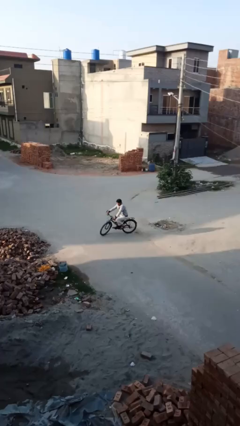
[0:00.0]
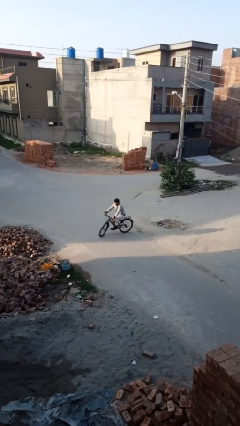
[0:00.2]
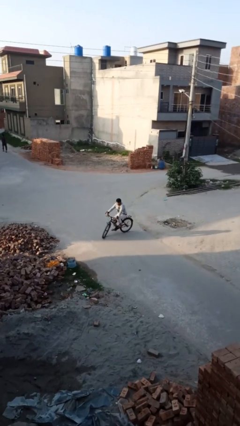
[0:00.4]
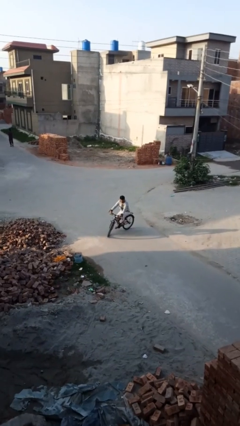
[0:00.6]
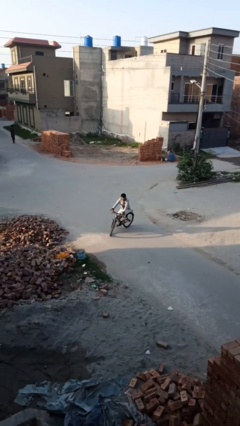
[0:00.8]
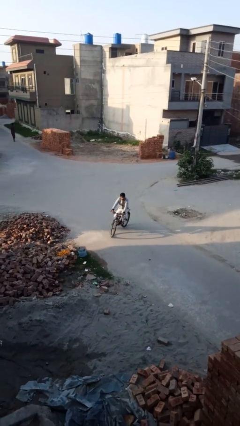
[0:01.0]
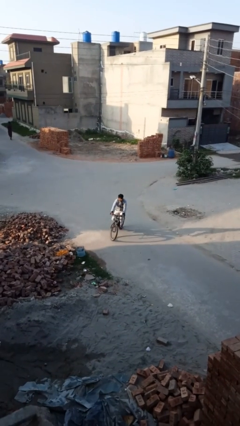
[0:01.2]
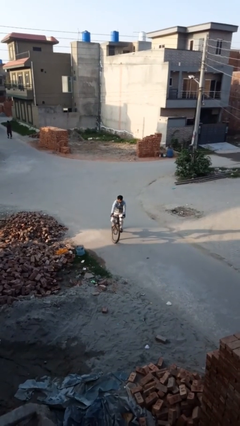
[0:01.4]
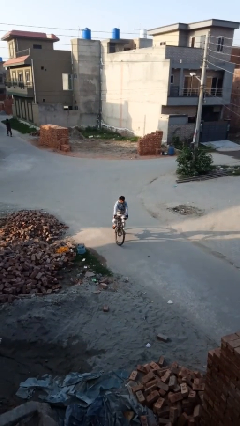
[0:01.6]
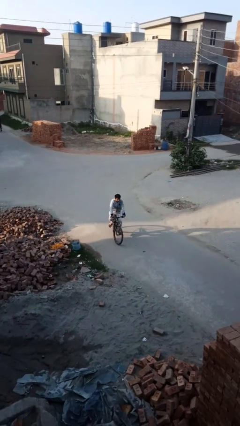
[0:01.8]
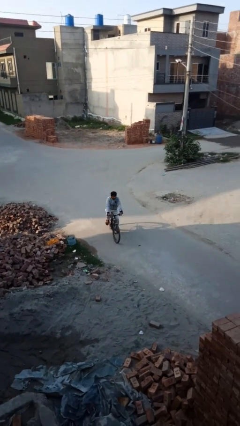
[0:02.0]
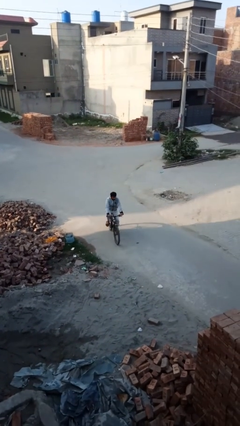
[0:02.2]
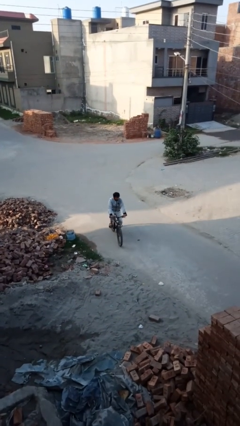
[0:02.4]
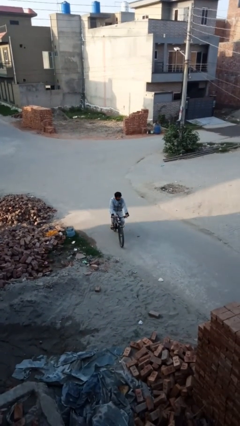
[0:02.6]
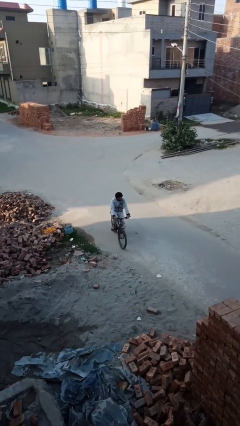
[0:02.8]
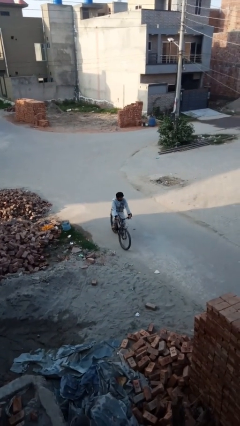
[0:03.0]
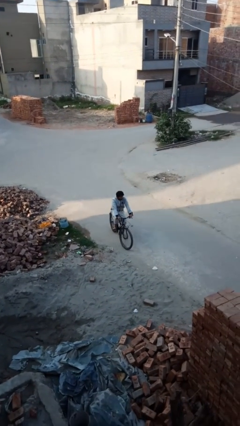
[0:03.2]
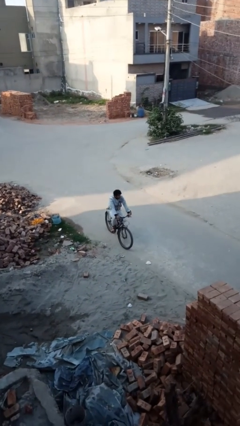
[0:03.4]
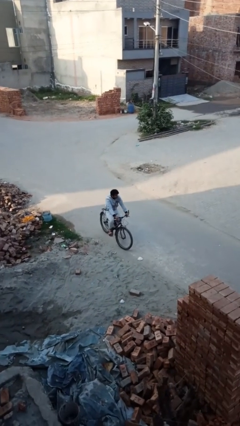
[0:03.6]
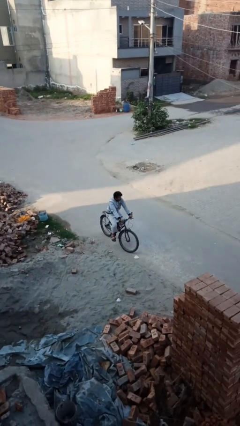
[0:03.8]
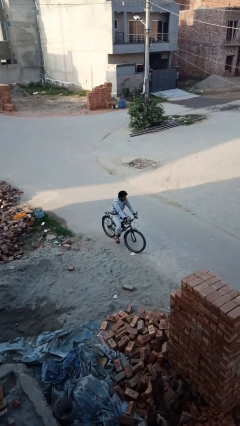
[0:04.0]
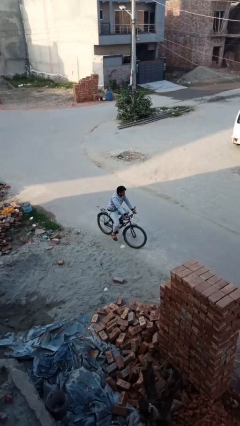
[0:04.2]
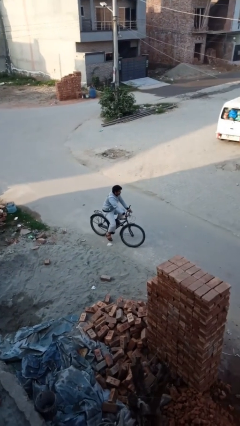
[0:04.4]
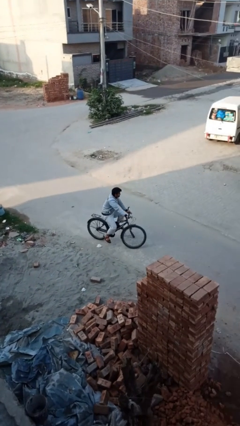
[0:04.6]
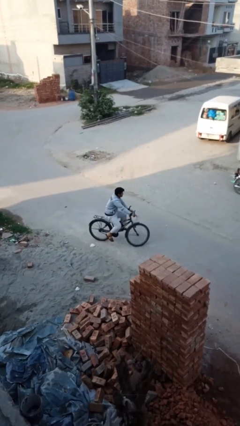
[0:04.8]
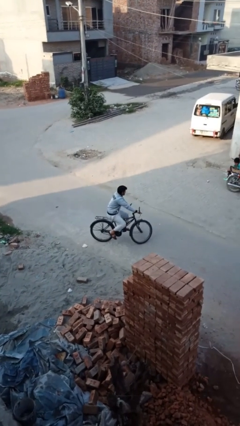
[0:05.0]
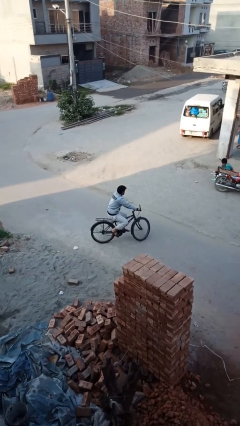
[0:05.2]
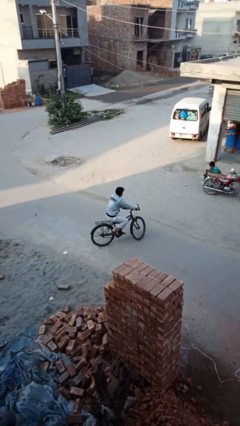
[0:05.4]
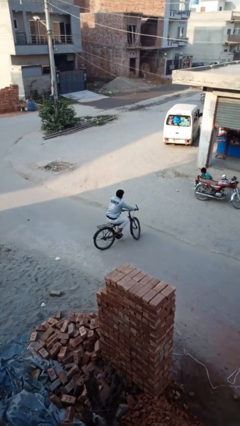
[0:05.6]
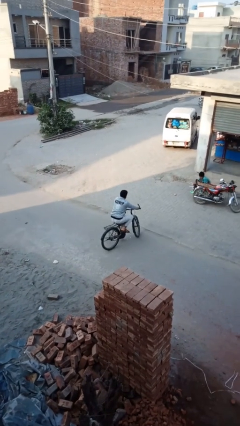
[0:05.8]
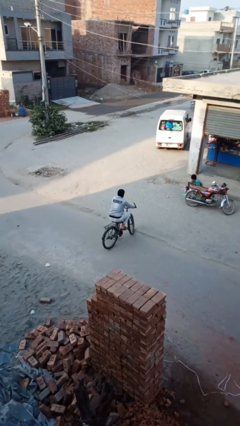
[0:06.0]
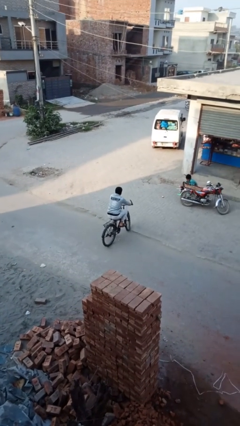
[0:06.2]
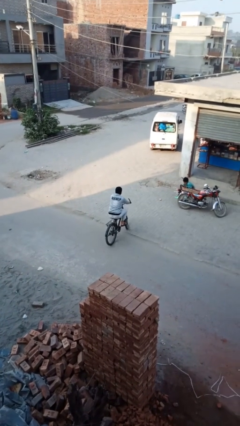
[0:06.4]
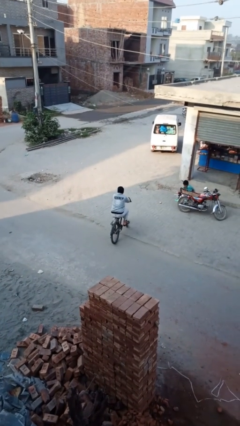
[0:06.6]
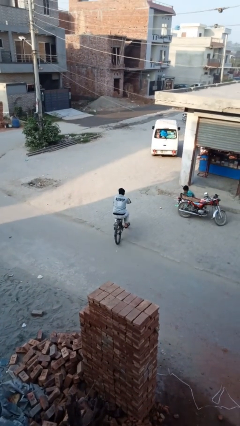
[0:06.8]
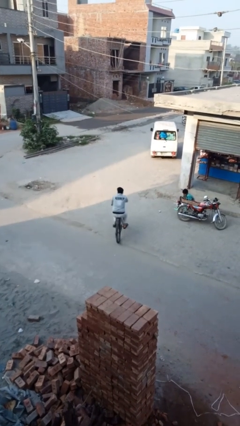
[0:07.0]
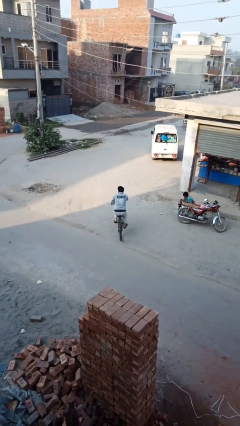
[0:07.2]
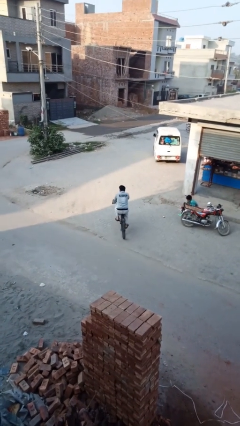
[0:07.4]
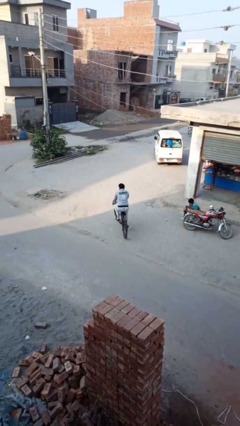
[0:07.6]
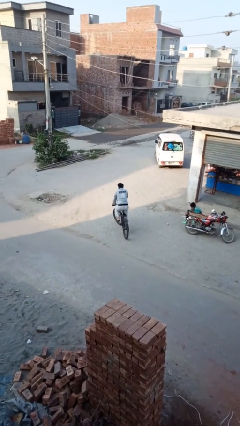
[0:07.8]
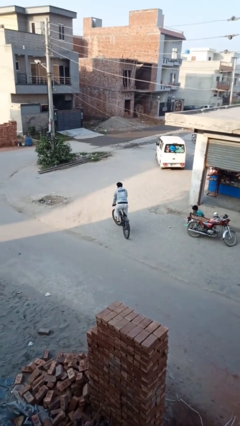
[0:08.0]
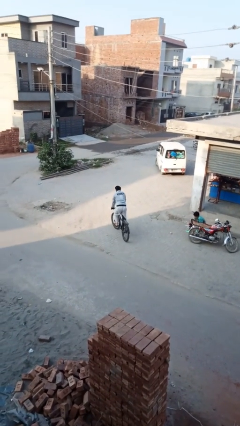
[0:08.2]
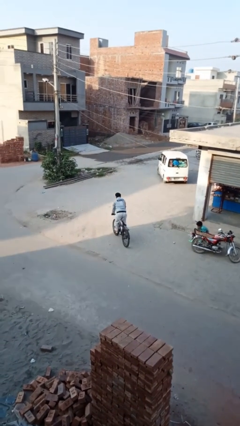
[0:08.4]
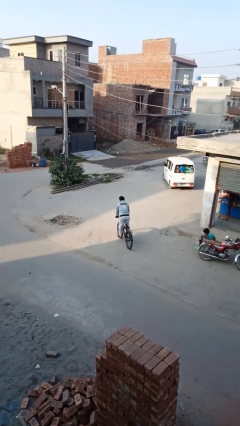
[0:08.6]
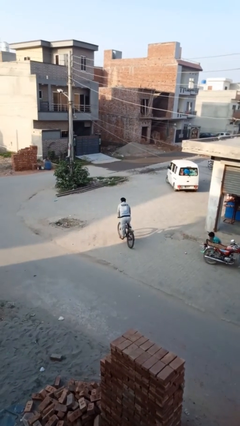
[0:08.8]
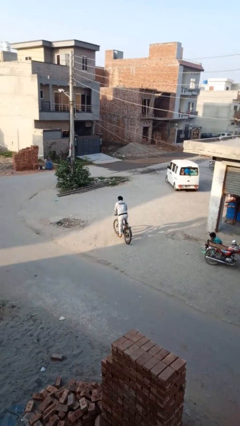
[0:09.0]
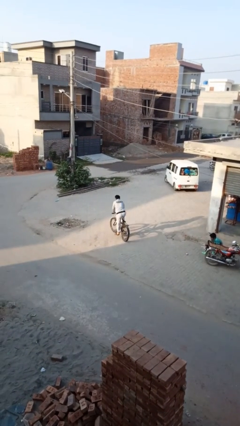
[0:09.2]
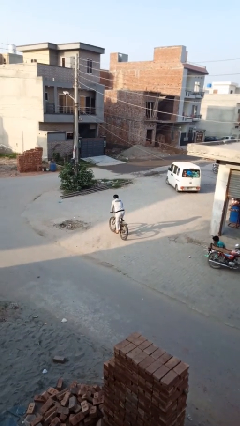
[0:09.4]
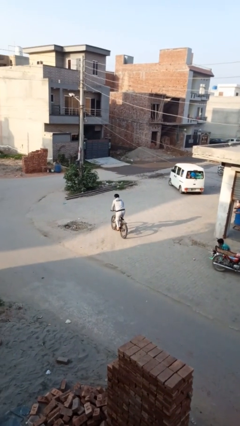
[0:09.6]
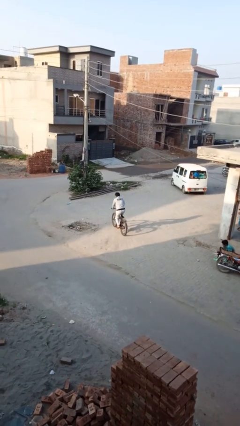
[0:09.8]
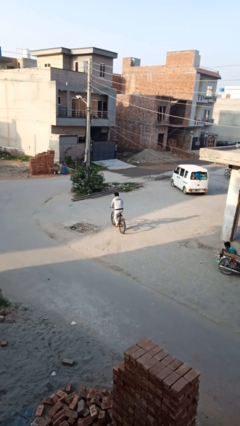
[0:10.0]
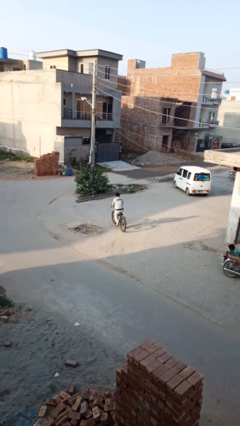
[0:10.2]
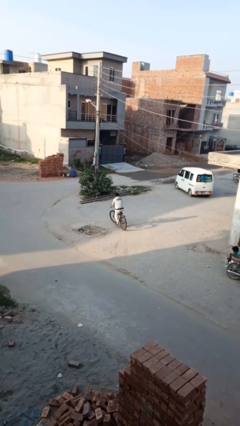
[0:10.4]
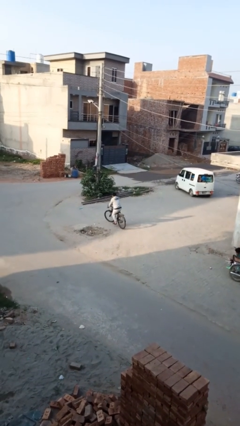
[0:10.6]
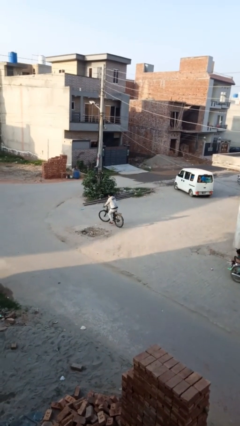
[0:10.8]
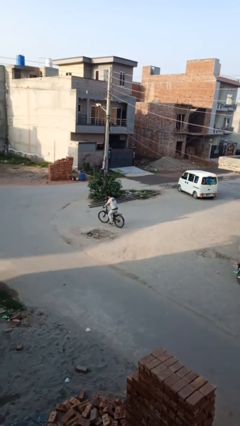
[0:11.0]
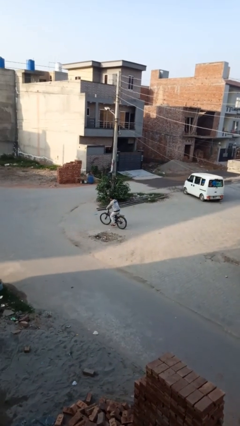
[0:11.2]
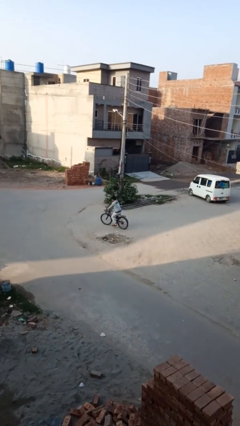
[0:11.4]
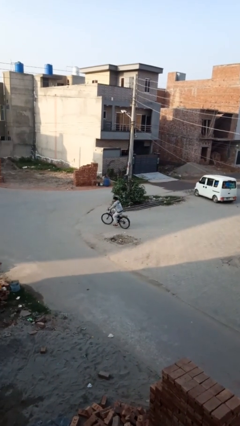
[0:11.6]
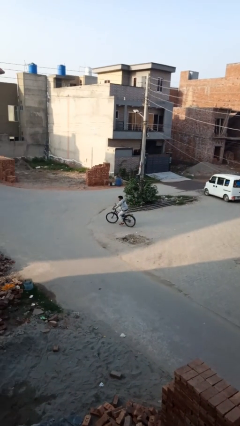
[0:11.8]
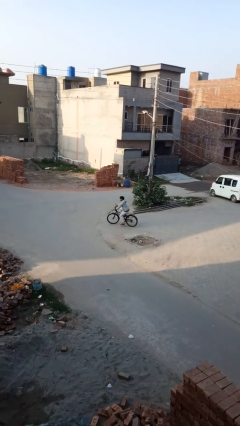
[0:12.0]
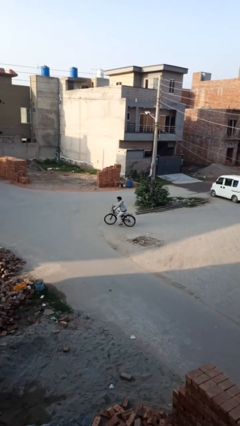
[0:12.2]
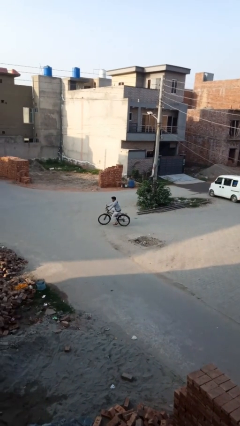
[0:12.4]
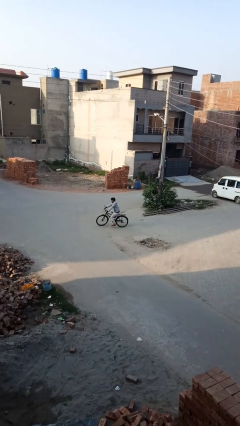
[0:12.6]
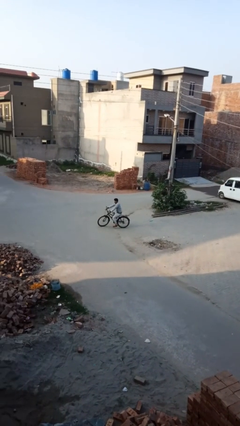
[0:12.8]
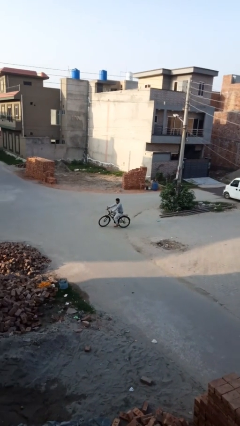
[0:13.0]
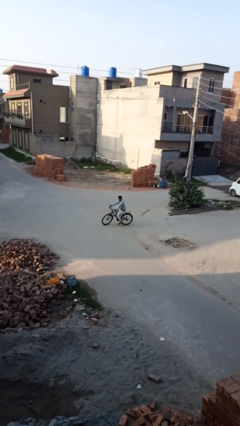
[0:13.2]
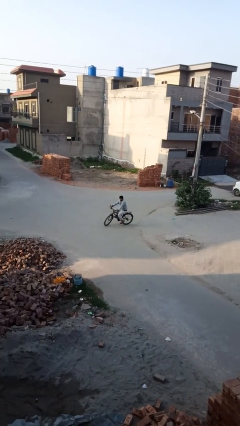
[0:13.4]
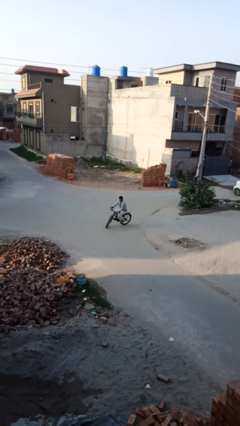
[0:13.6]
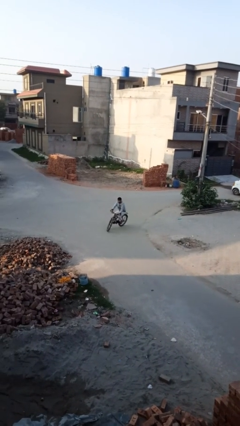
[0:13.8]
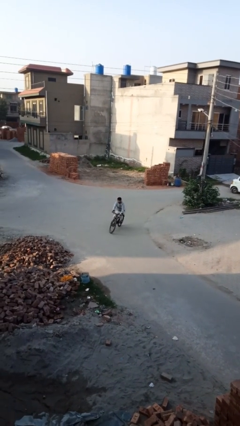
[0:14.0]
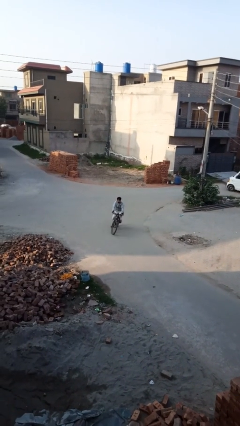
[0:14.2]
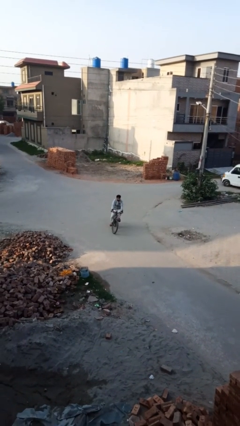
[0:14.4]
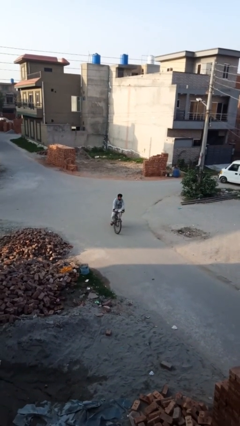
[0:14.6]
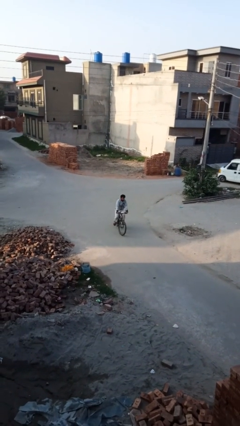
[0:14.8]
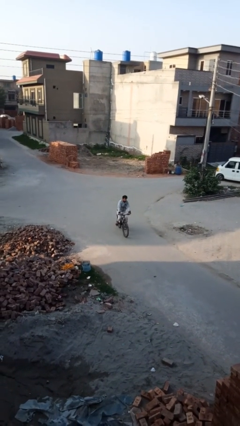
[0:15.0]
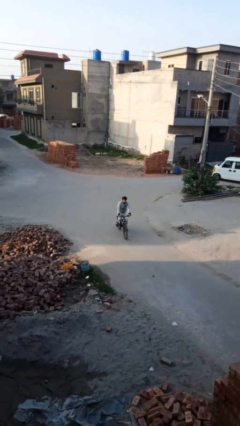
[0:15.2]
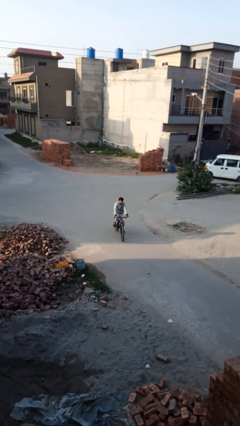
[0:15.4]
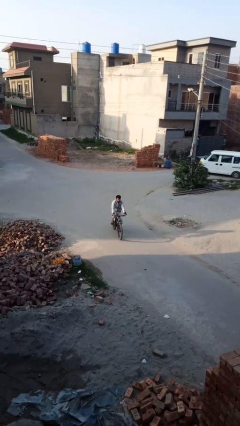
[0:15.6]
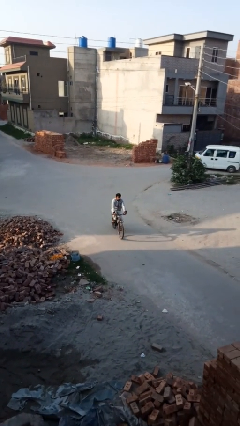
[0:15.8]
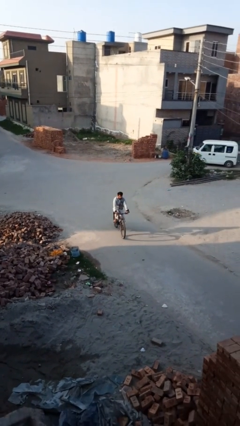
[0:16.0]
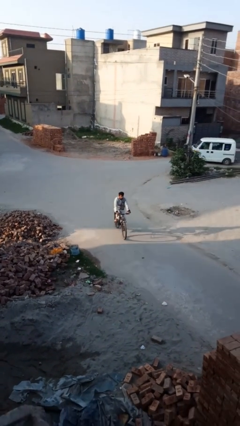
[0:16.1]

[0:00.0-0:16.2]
person rides bicycle

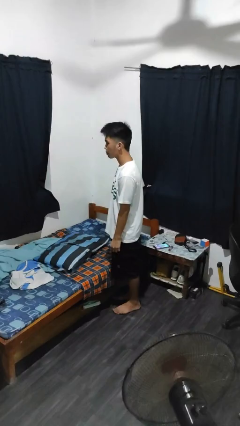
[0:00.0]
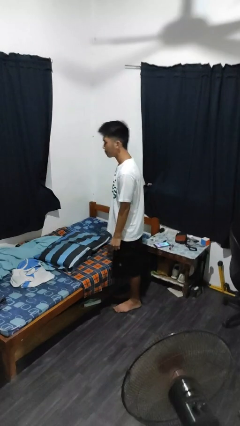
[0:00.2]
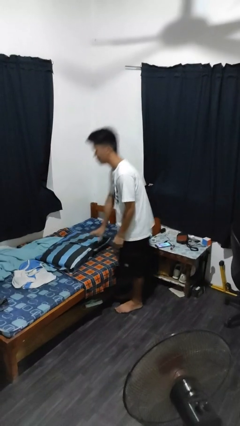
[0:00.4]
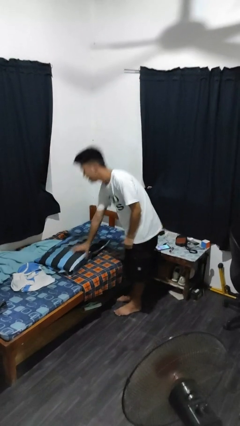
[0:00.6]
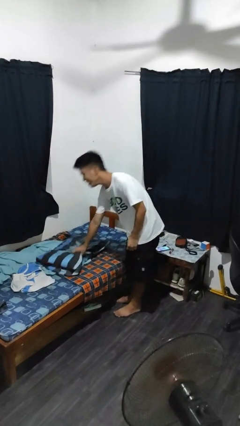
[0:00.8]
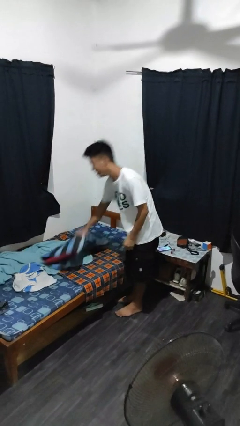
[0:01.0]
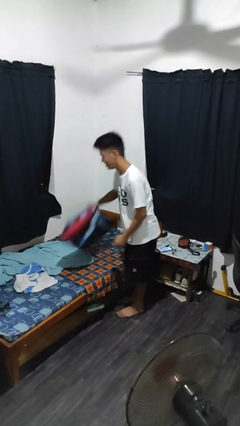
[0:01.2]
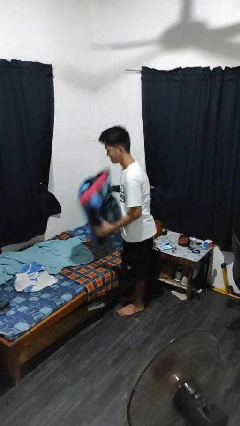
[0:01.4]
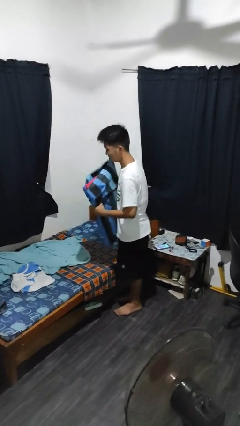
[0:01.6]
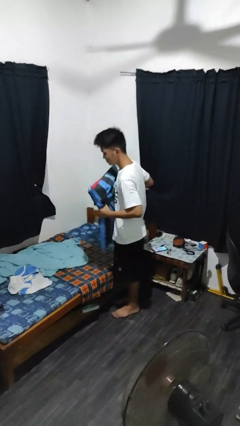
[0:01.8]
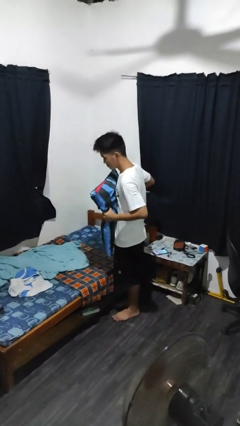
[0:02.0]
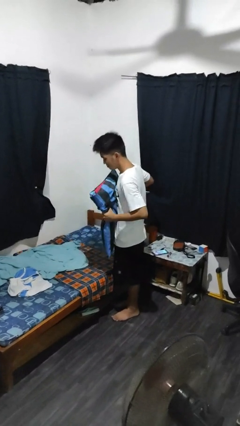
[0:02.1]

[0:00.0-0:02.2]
person picks up object from bed
